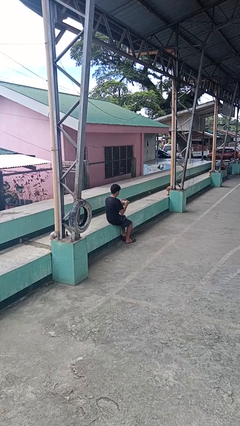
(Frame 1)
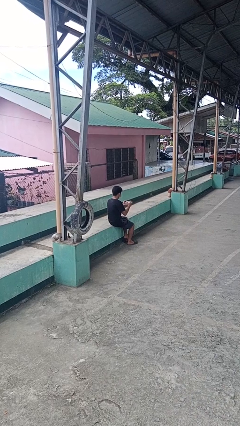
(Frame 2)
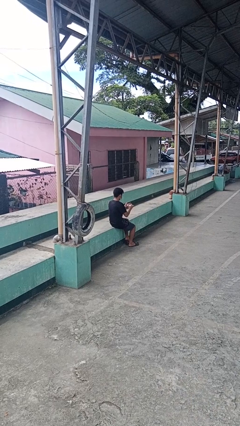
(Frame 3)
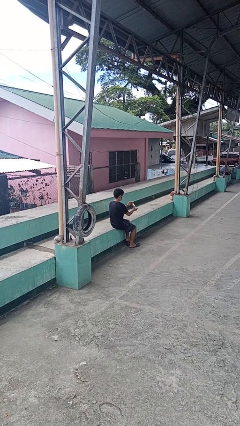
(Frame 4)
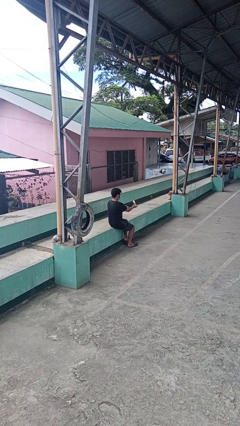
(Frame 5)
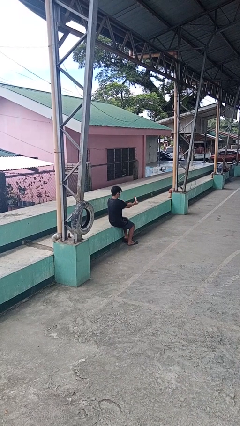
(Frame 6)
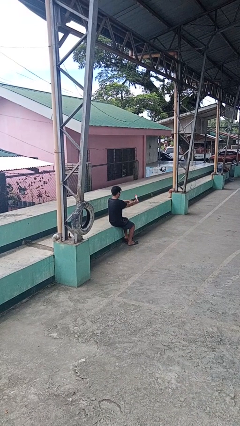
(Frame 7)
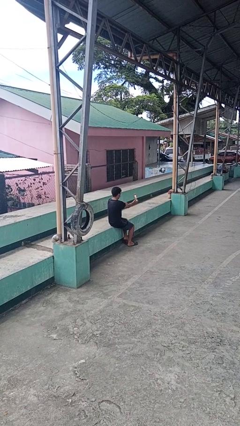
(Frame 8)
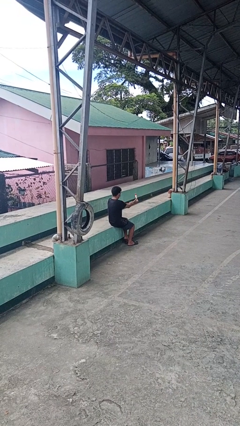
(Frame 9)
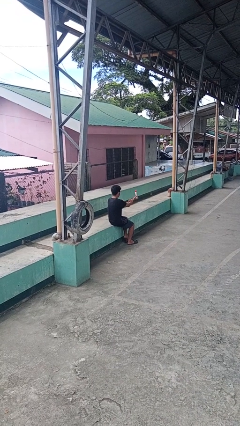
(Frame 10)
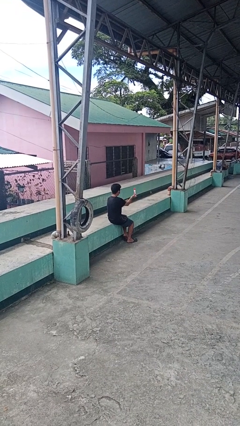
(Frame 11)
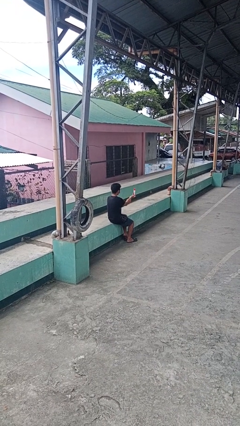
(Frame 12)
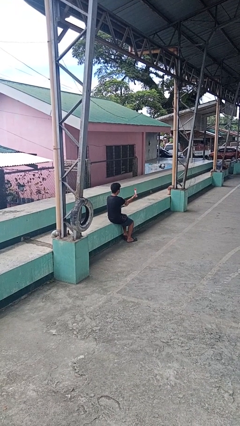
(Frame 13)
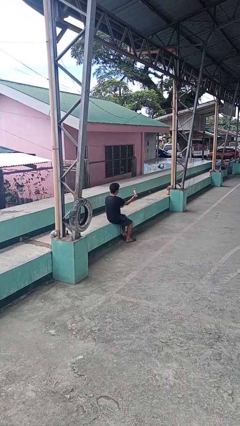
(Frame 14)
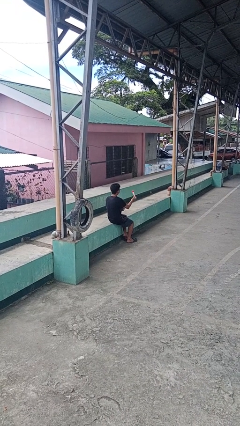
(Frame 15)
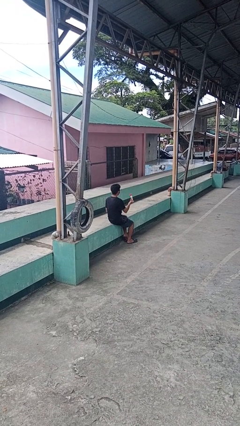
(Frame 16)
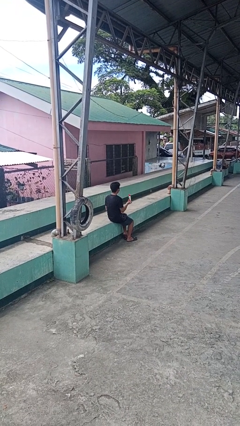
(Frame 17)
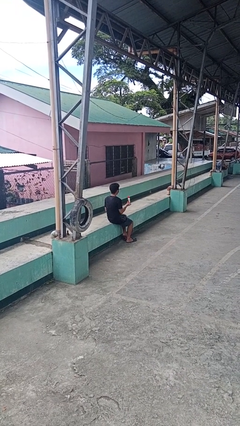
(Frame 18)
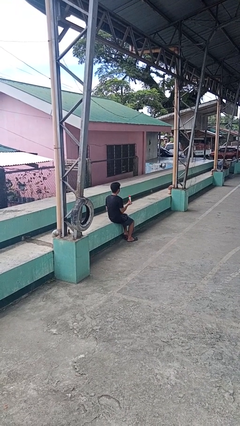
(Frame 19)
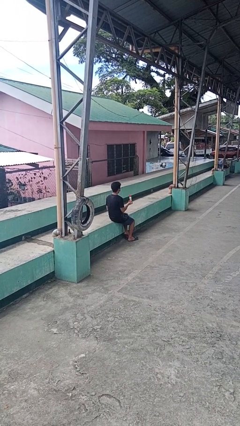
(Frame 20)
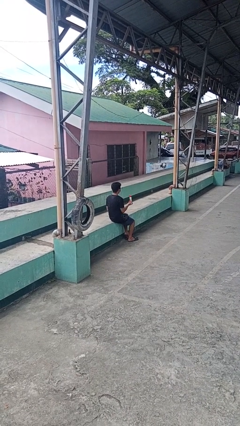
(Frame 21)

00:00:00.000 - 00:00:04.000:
person applies sunscreen

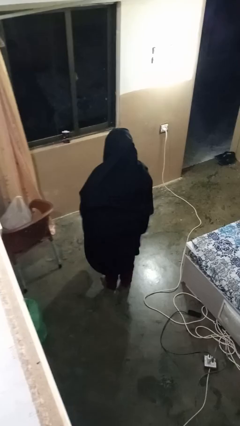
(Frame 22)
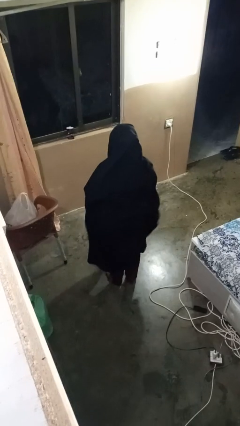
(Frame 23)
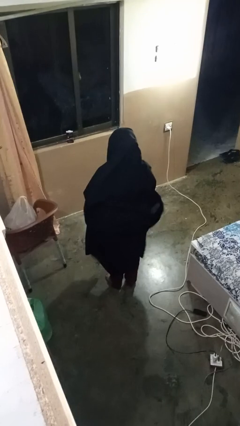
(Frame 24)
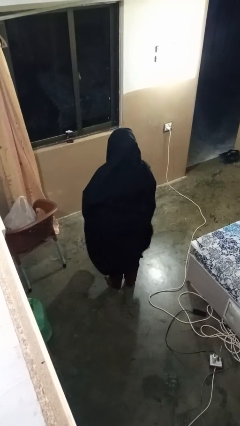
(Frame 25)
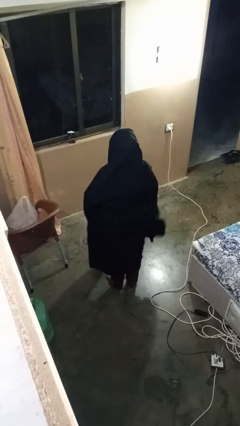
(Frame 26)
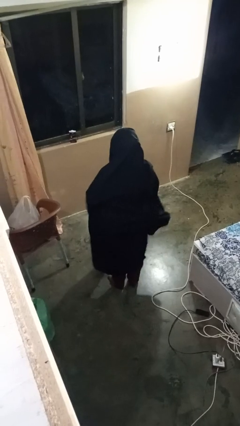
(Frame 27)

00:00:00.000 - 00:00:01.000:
person gestures swipe down

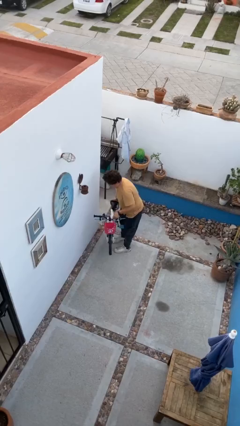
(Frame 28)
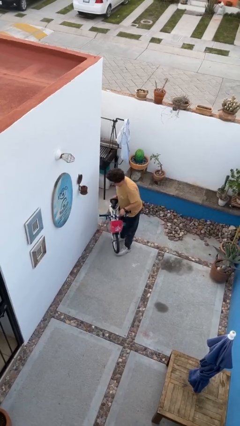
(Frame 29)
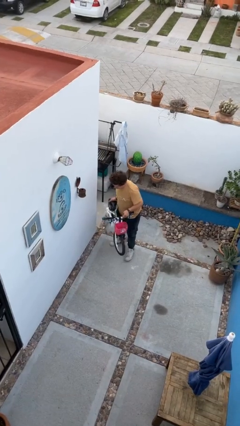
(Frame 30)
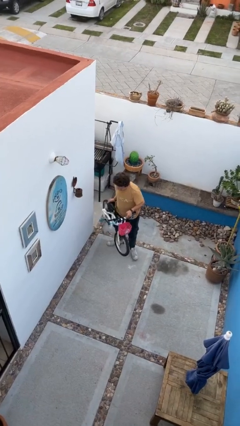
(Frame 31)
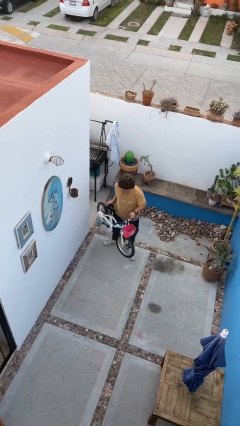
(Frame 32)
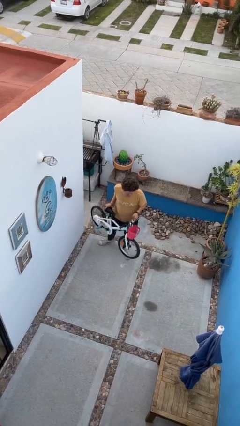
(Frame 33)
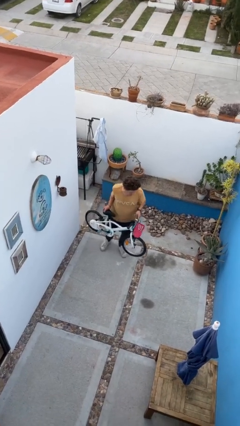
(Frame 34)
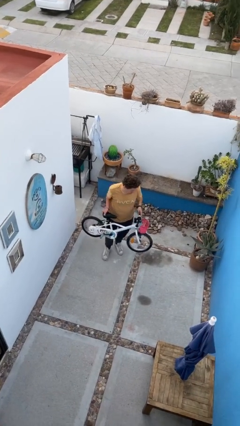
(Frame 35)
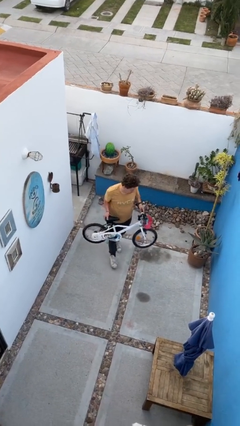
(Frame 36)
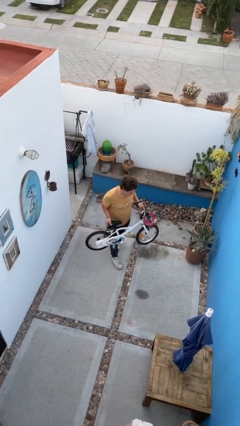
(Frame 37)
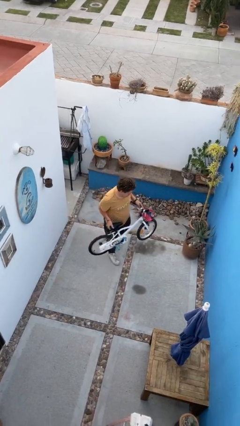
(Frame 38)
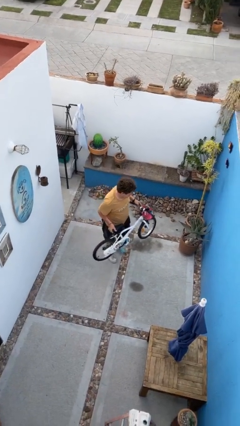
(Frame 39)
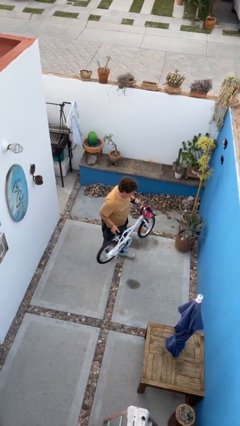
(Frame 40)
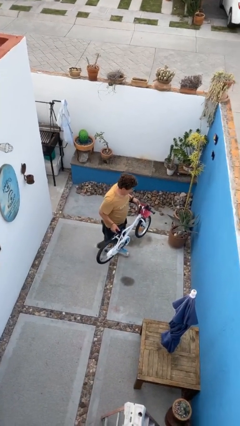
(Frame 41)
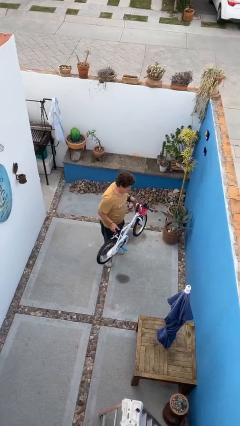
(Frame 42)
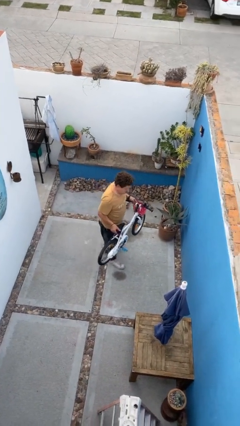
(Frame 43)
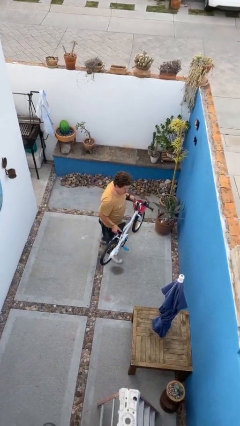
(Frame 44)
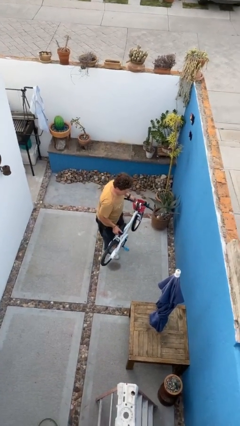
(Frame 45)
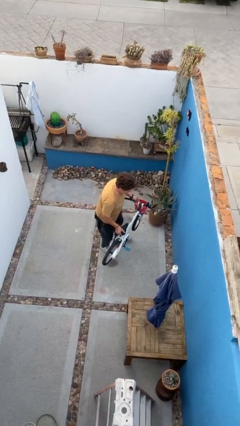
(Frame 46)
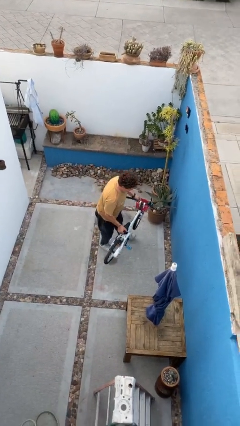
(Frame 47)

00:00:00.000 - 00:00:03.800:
person carries heavy object

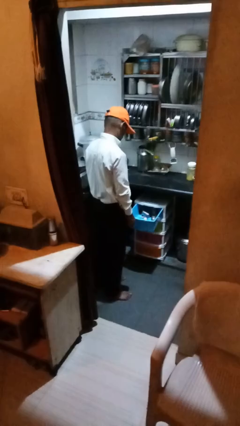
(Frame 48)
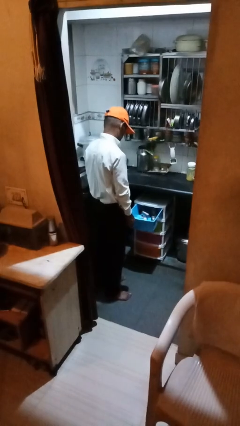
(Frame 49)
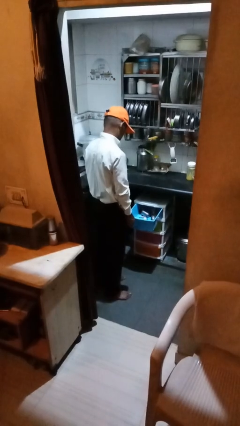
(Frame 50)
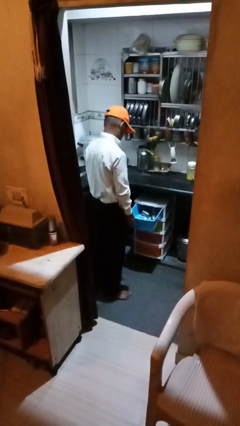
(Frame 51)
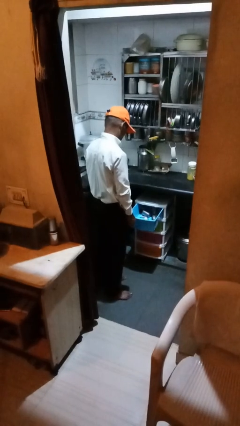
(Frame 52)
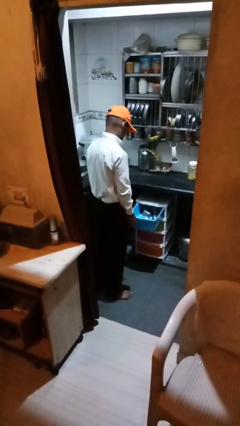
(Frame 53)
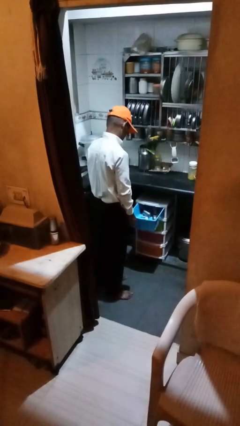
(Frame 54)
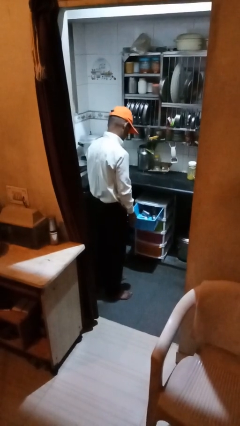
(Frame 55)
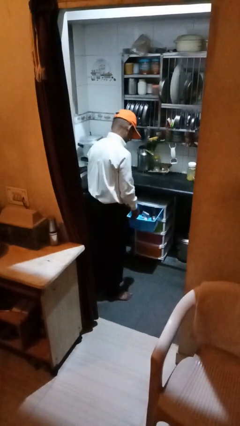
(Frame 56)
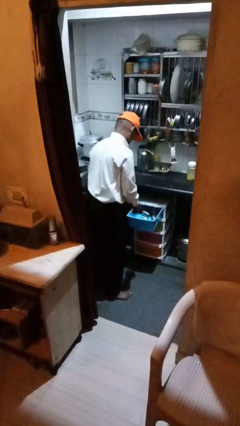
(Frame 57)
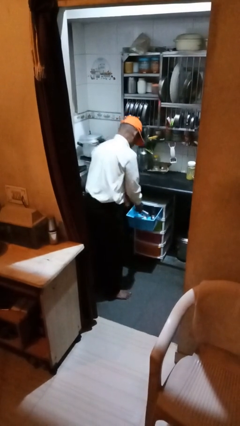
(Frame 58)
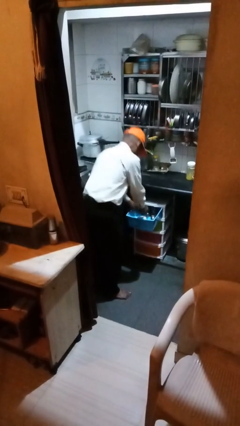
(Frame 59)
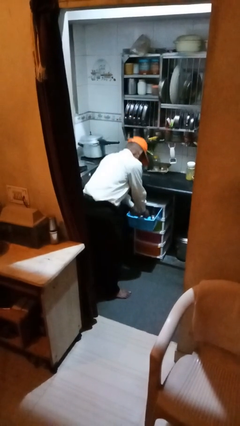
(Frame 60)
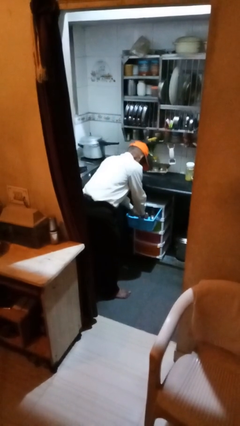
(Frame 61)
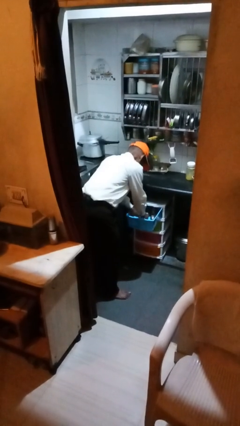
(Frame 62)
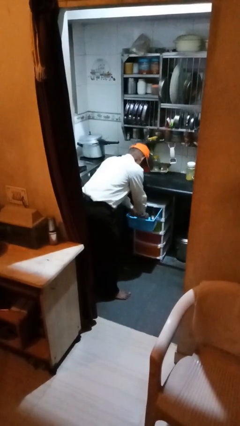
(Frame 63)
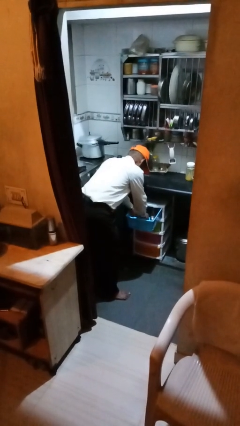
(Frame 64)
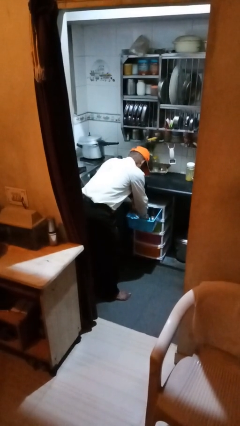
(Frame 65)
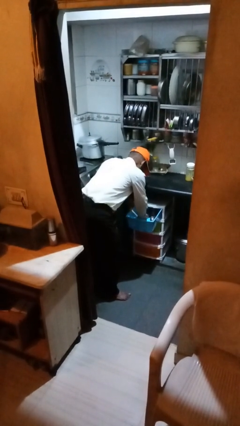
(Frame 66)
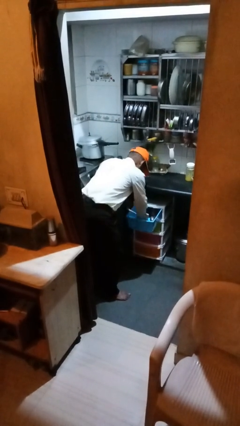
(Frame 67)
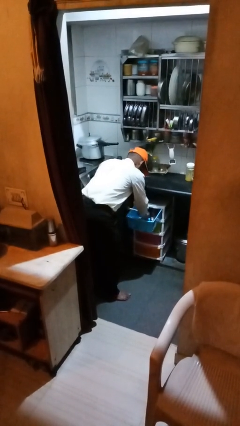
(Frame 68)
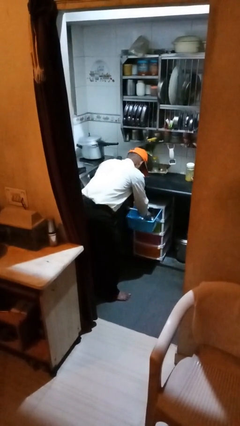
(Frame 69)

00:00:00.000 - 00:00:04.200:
person takes object from kitchen drawer

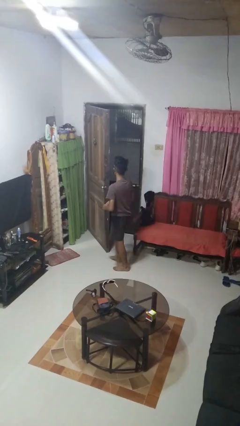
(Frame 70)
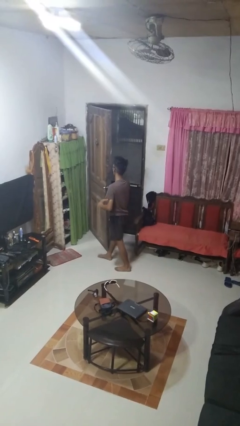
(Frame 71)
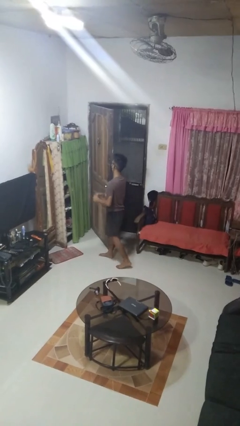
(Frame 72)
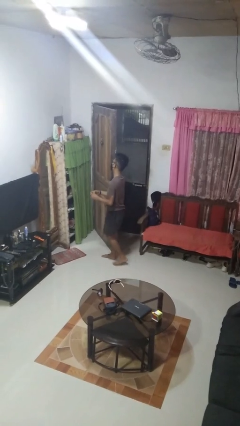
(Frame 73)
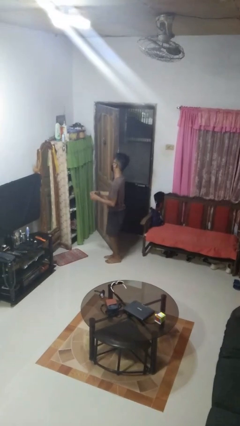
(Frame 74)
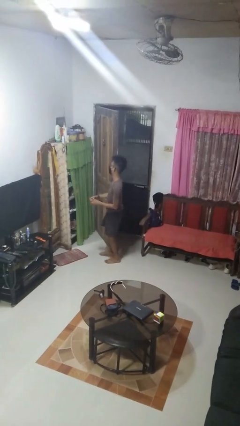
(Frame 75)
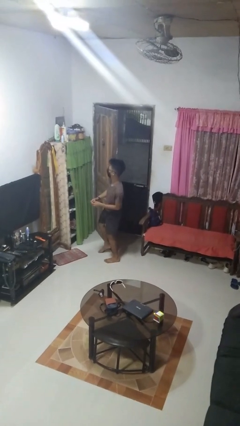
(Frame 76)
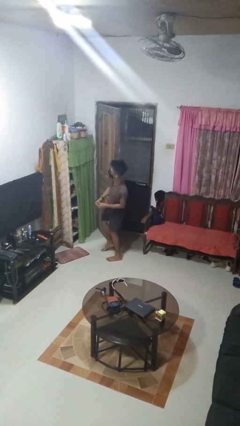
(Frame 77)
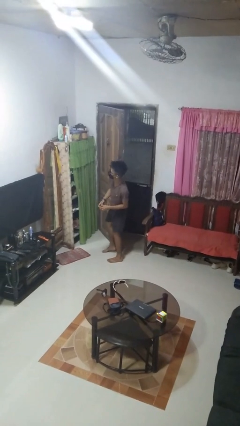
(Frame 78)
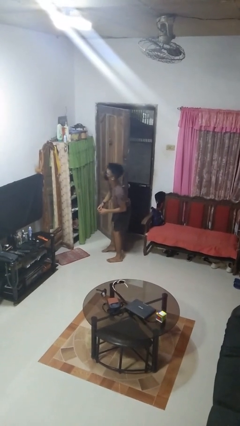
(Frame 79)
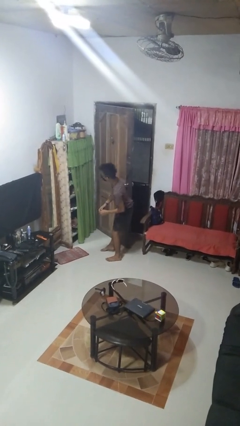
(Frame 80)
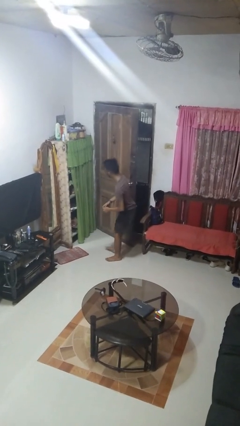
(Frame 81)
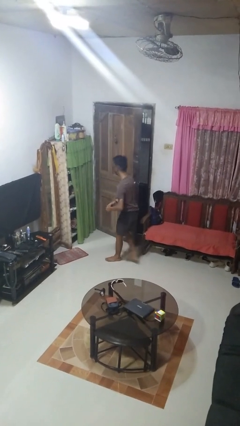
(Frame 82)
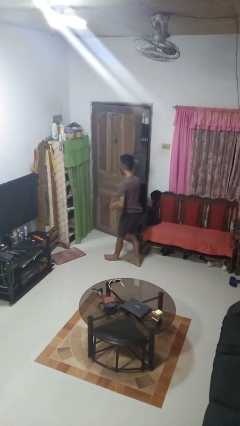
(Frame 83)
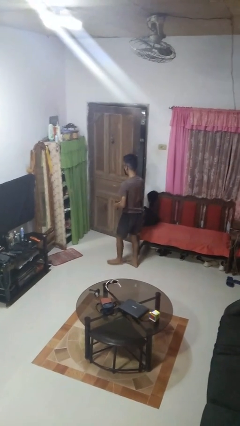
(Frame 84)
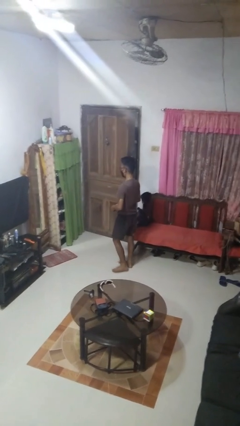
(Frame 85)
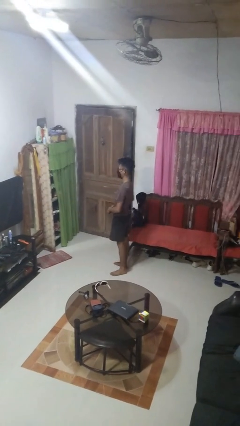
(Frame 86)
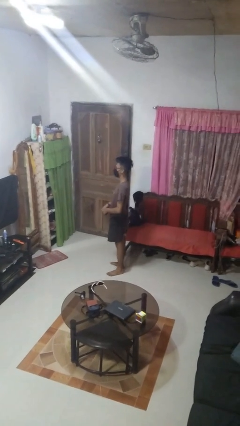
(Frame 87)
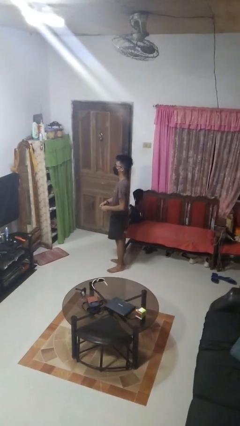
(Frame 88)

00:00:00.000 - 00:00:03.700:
person closes door with hip

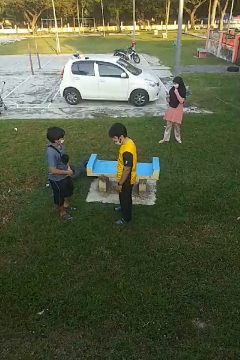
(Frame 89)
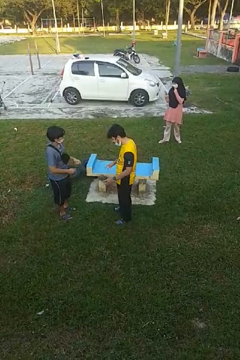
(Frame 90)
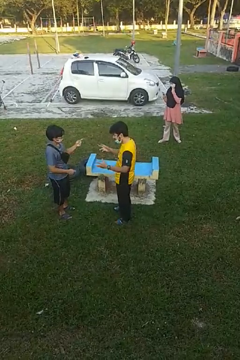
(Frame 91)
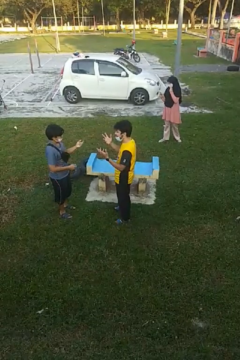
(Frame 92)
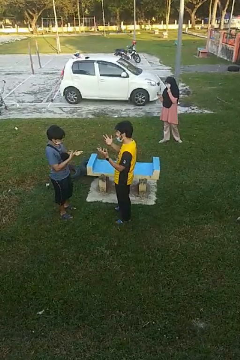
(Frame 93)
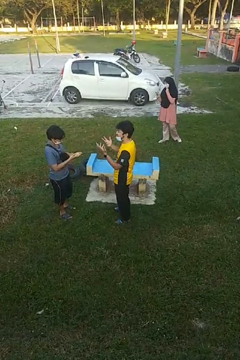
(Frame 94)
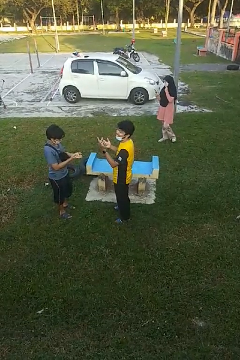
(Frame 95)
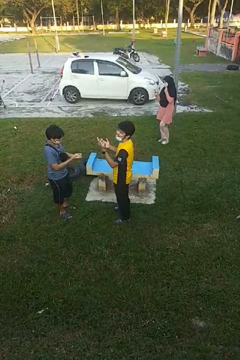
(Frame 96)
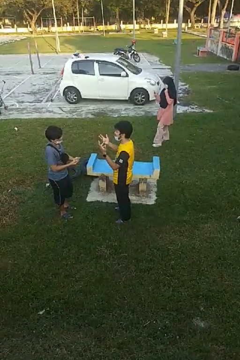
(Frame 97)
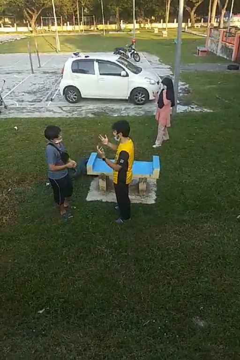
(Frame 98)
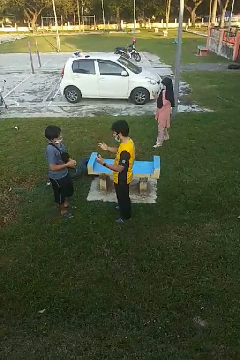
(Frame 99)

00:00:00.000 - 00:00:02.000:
person talks to person
